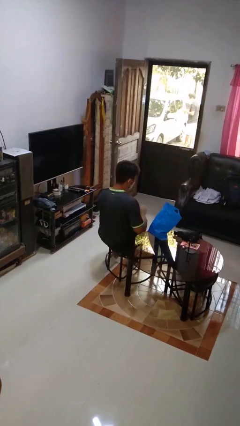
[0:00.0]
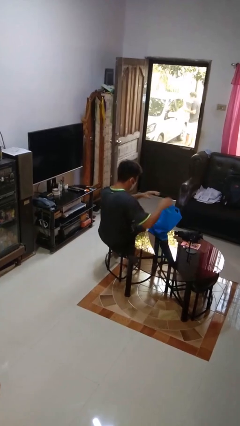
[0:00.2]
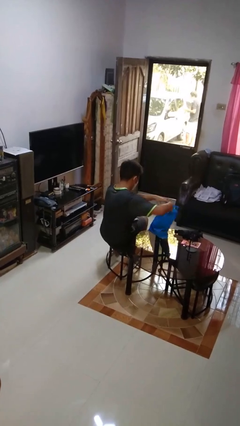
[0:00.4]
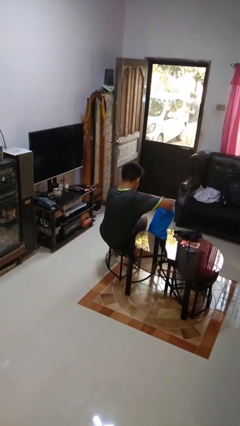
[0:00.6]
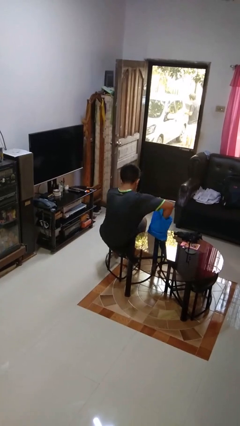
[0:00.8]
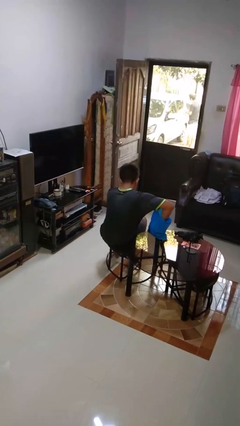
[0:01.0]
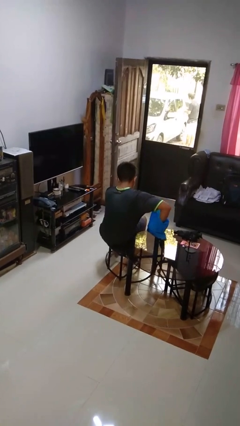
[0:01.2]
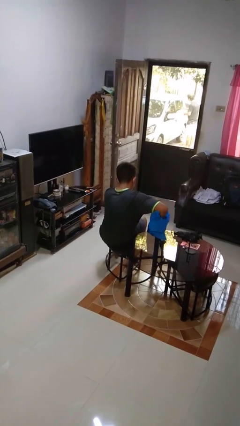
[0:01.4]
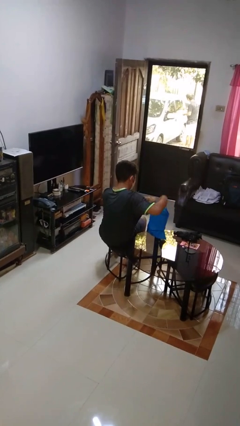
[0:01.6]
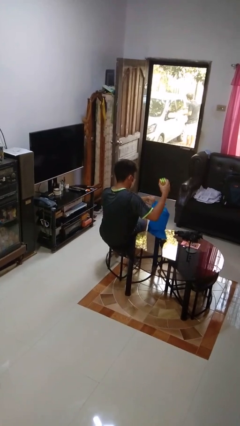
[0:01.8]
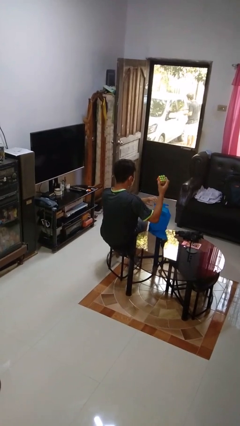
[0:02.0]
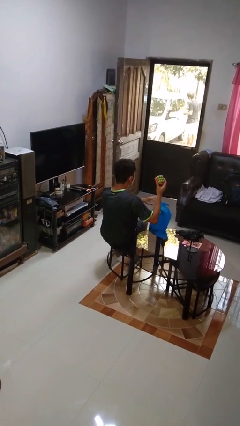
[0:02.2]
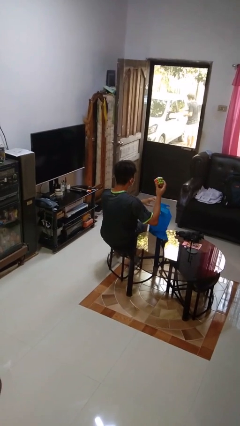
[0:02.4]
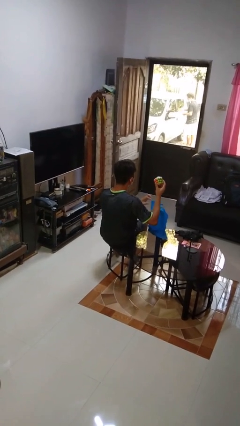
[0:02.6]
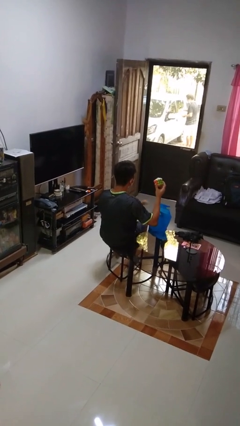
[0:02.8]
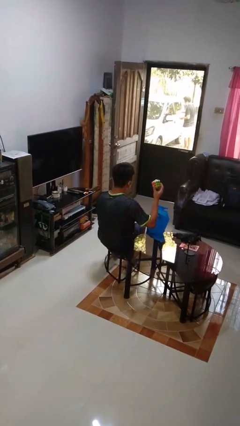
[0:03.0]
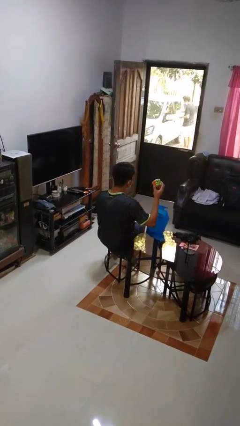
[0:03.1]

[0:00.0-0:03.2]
person takes object from bag

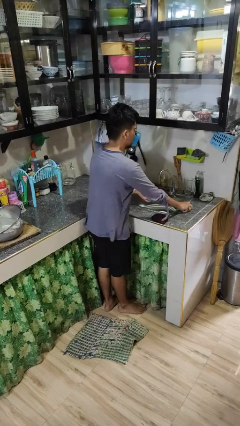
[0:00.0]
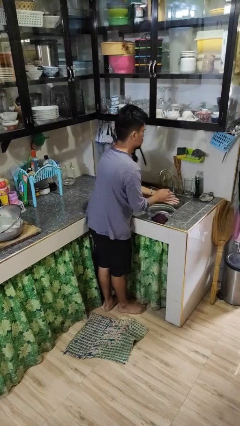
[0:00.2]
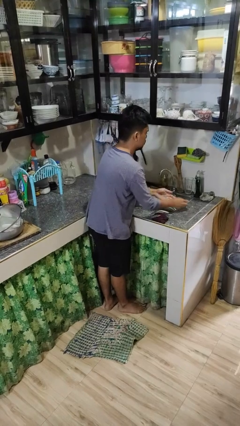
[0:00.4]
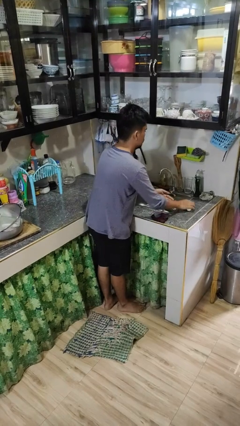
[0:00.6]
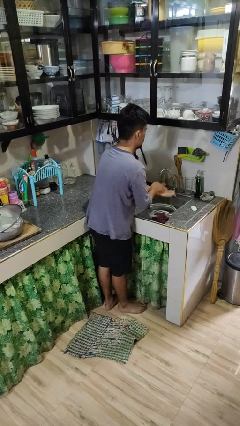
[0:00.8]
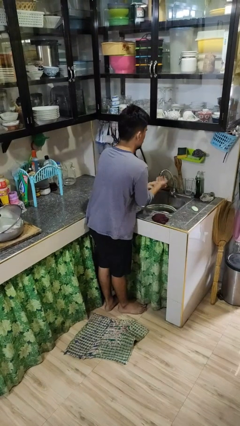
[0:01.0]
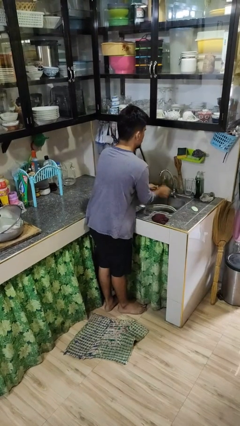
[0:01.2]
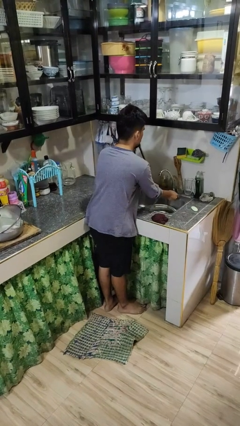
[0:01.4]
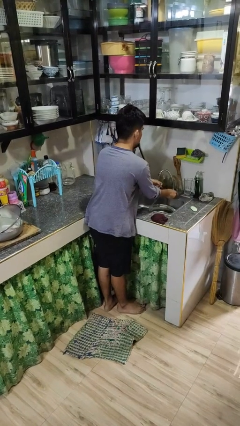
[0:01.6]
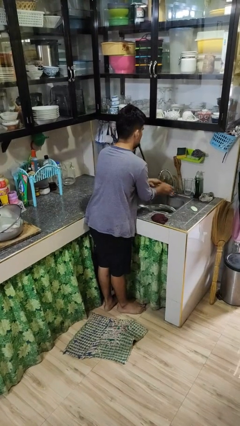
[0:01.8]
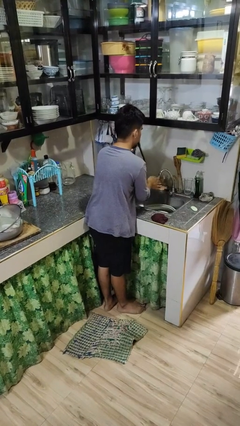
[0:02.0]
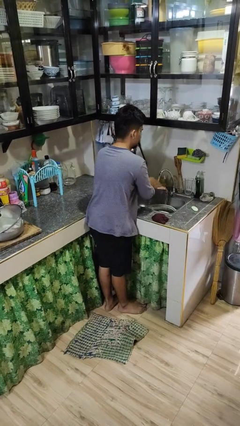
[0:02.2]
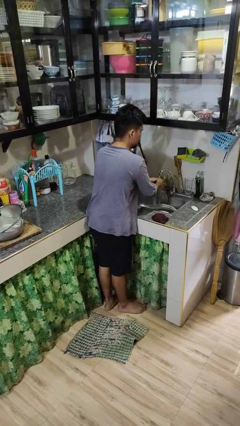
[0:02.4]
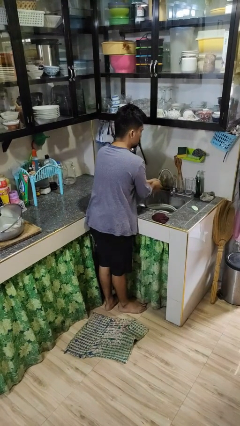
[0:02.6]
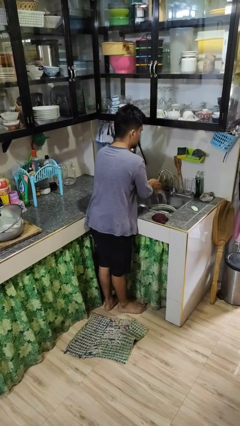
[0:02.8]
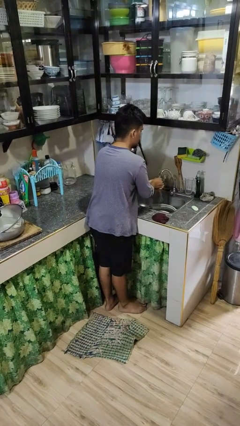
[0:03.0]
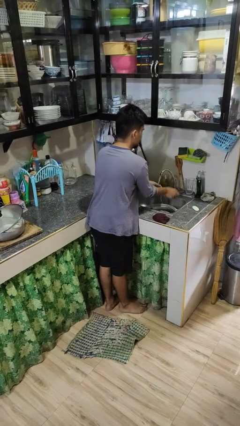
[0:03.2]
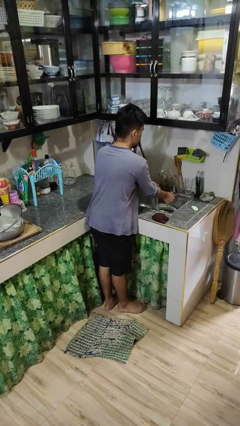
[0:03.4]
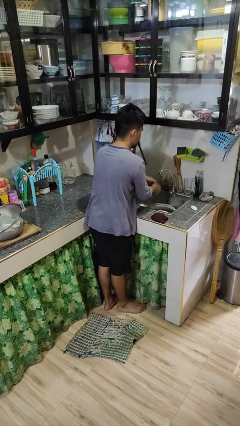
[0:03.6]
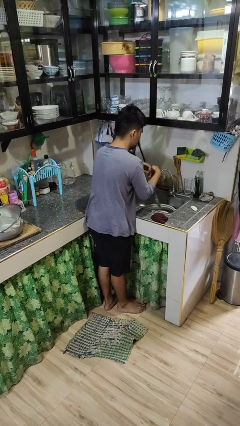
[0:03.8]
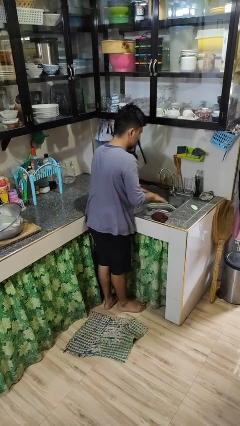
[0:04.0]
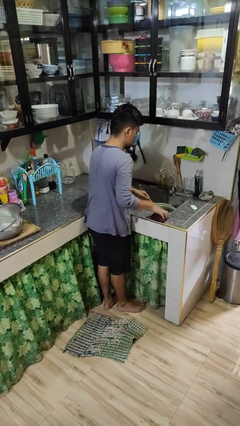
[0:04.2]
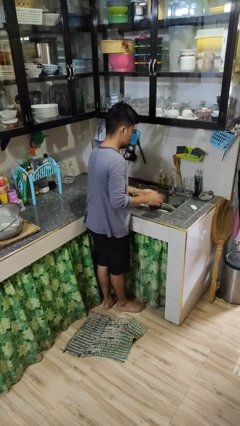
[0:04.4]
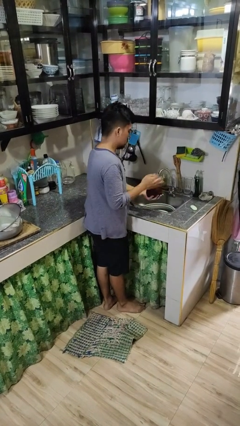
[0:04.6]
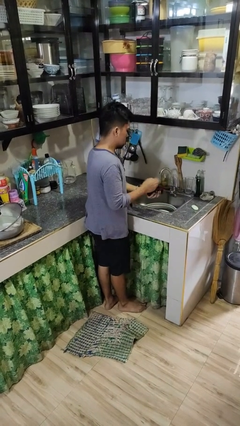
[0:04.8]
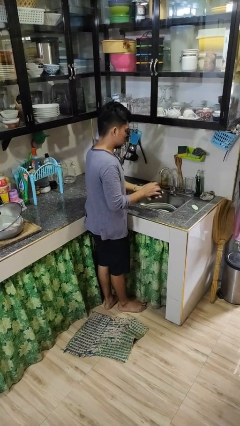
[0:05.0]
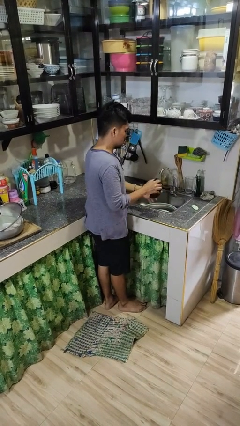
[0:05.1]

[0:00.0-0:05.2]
person washes hands

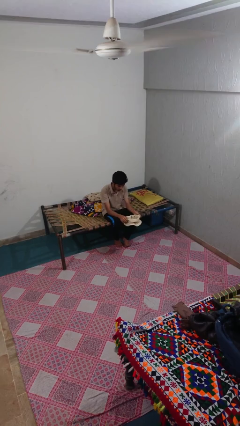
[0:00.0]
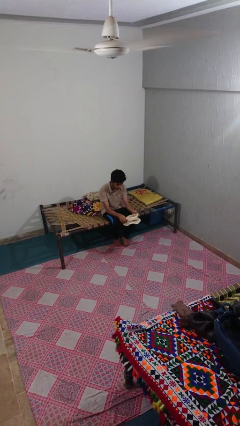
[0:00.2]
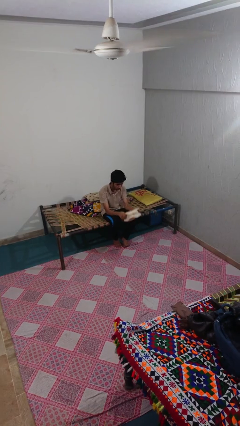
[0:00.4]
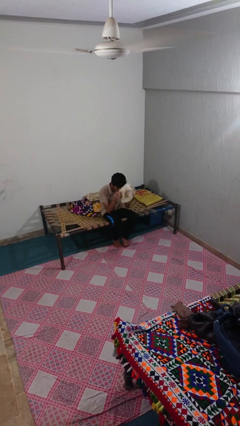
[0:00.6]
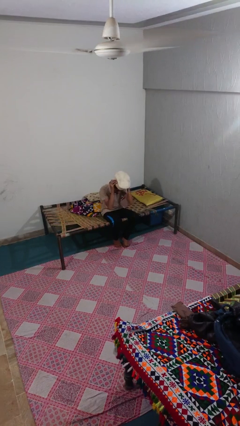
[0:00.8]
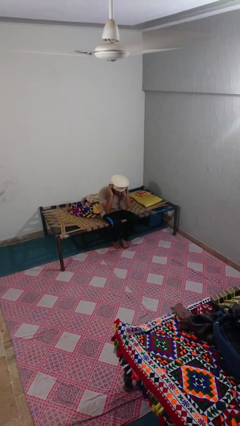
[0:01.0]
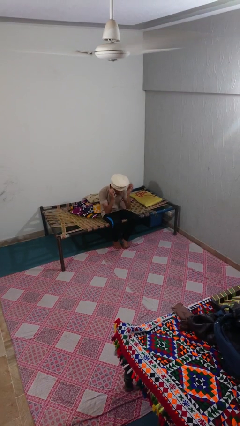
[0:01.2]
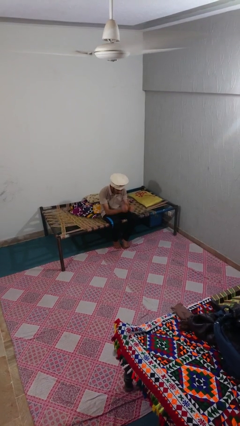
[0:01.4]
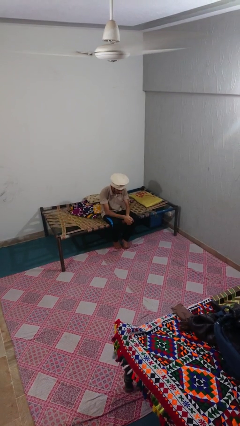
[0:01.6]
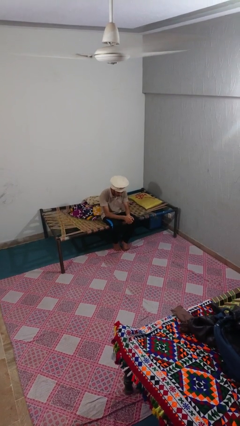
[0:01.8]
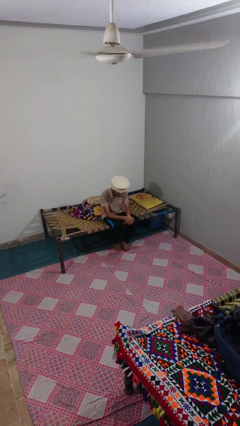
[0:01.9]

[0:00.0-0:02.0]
person puts on hat

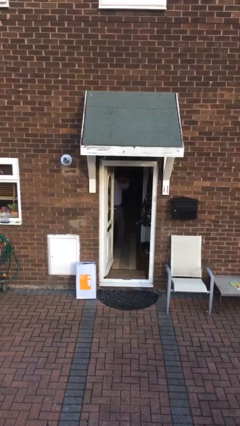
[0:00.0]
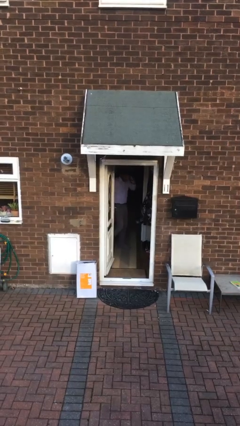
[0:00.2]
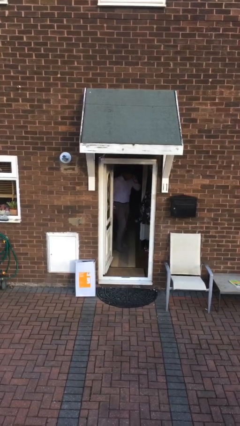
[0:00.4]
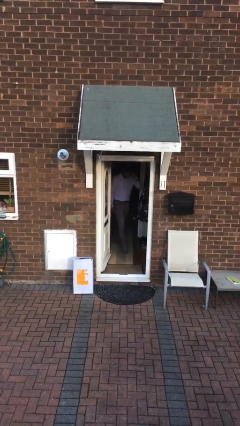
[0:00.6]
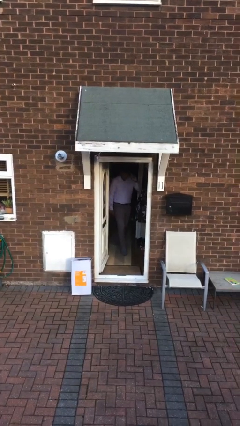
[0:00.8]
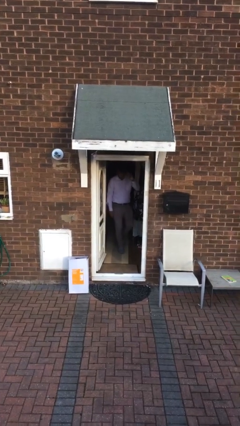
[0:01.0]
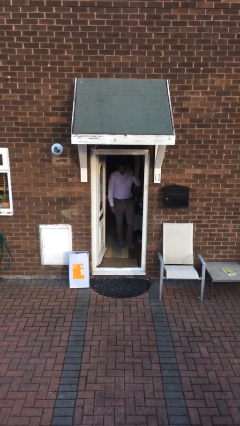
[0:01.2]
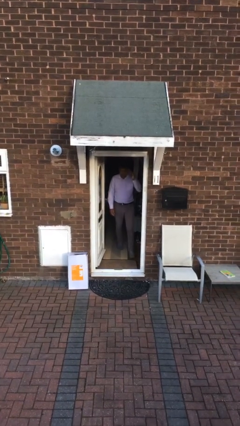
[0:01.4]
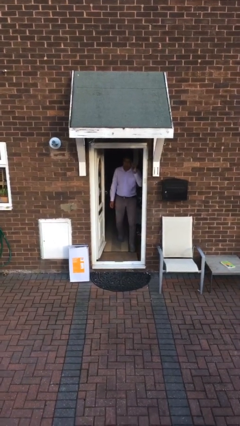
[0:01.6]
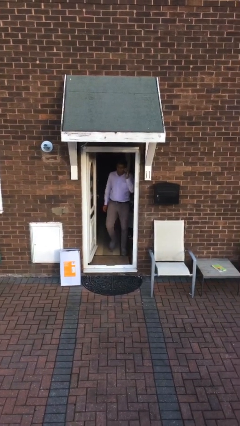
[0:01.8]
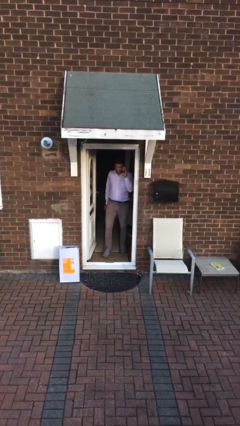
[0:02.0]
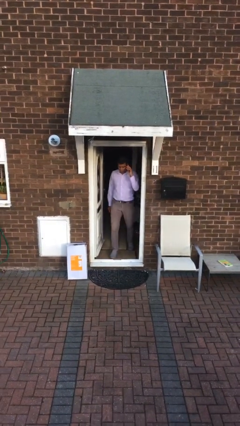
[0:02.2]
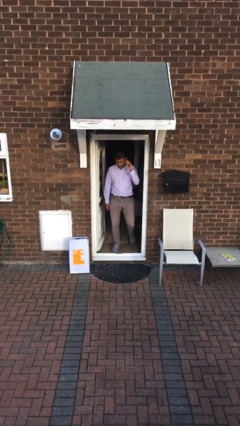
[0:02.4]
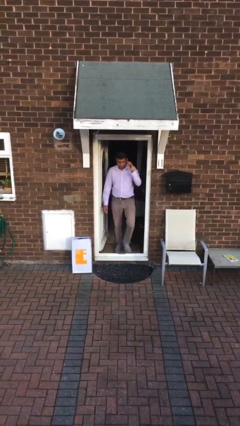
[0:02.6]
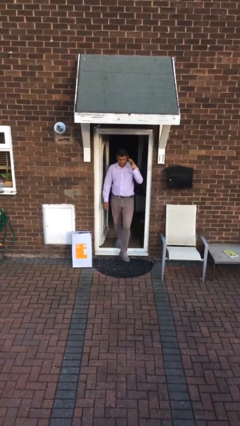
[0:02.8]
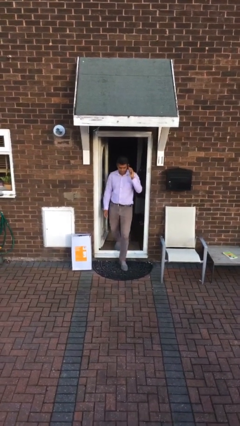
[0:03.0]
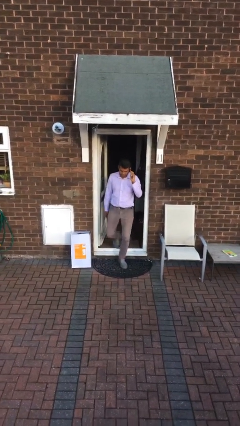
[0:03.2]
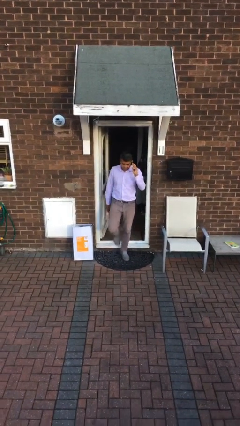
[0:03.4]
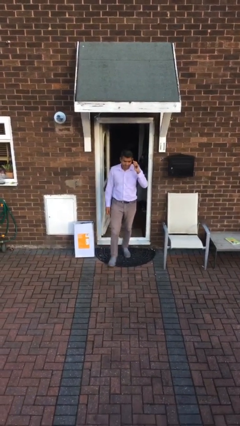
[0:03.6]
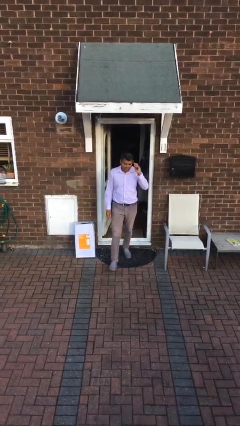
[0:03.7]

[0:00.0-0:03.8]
person enters scene through structure

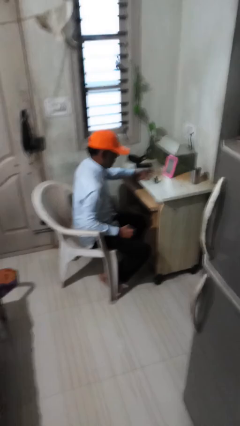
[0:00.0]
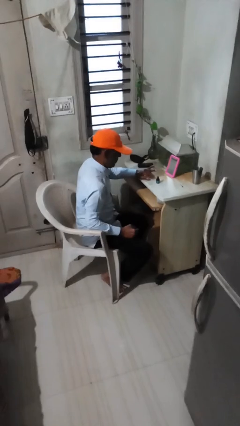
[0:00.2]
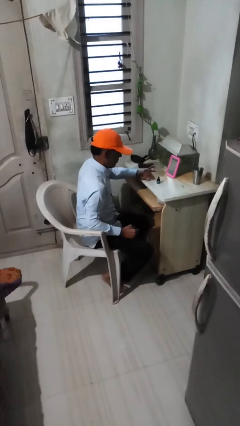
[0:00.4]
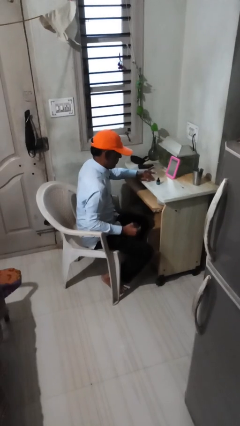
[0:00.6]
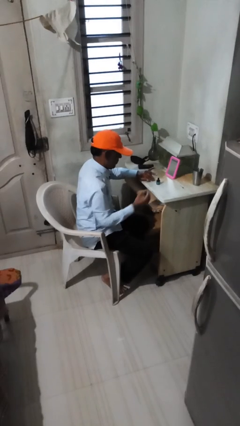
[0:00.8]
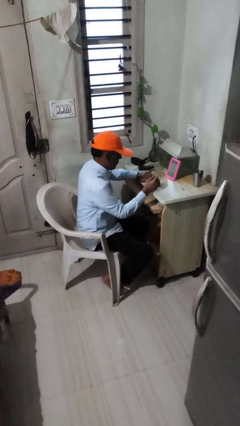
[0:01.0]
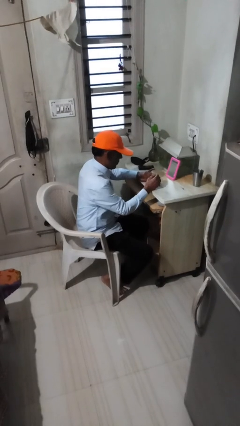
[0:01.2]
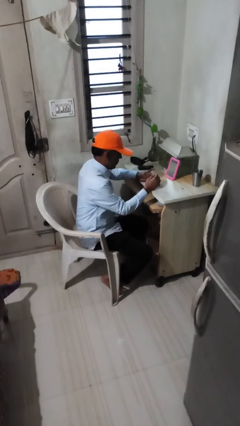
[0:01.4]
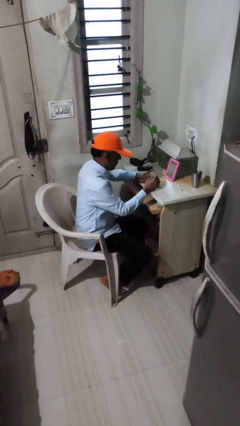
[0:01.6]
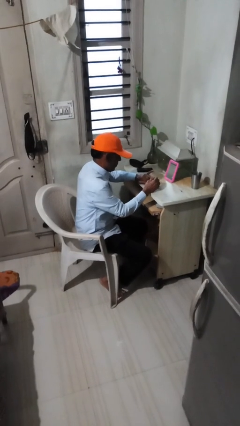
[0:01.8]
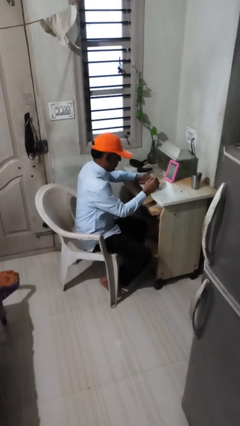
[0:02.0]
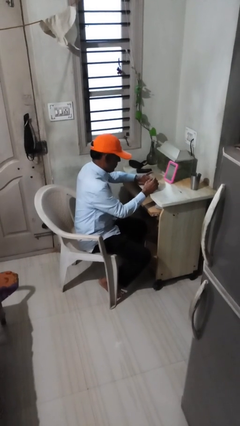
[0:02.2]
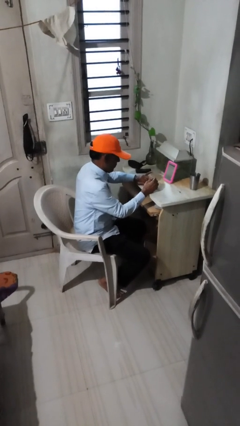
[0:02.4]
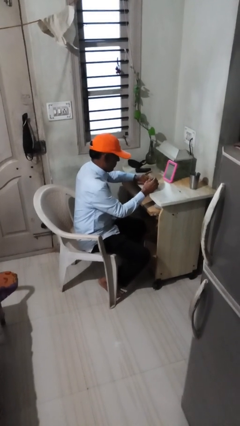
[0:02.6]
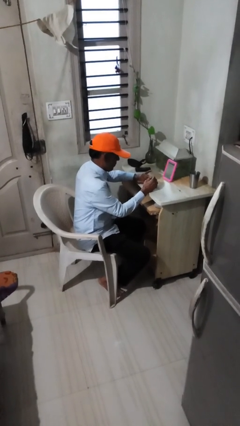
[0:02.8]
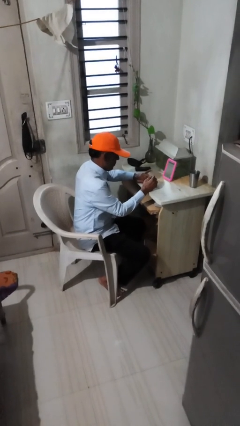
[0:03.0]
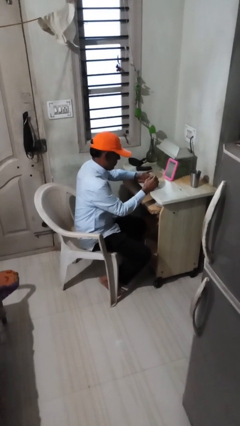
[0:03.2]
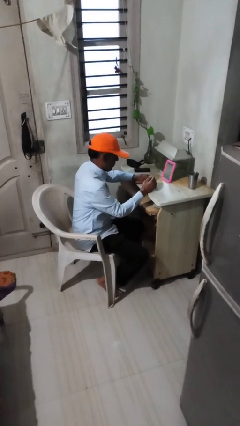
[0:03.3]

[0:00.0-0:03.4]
person paints fingernails
